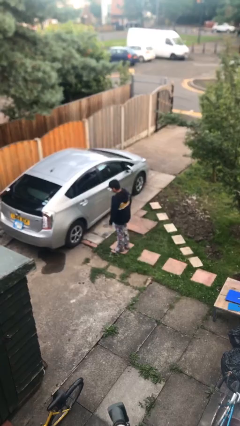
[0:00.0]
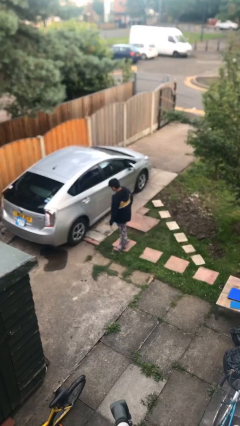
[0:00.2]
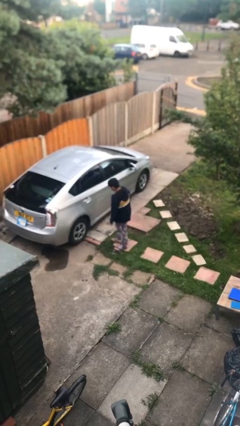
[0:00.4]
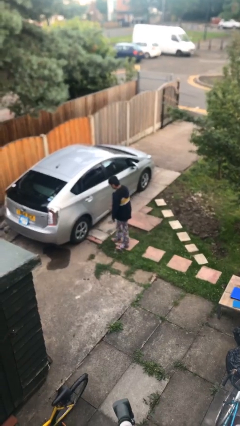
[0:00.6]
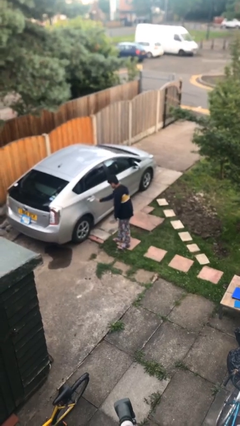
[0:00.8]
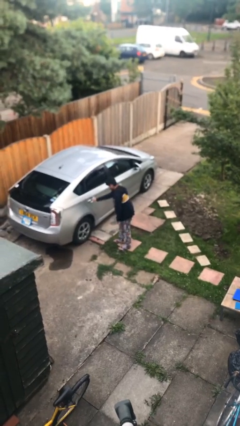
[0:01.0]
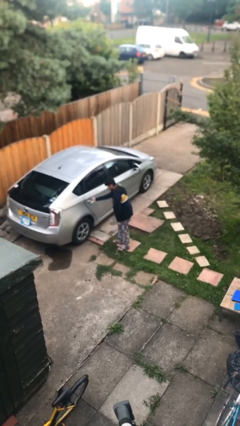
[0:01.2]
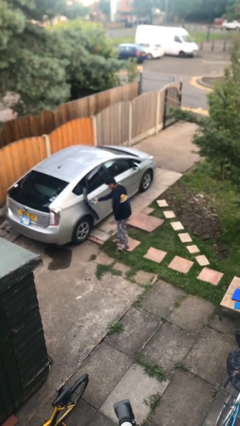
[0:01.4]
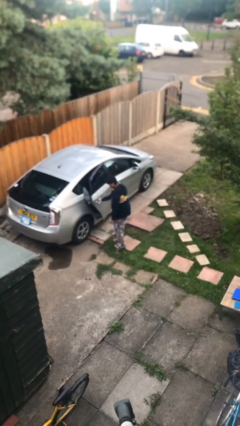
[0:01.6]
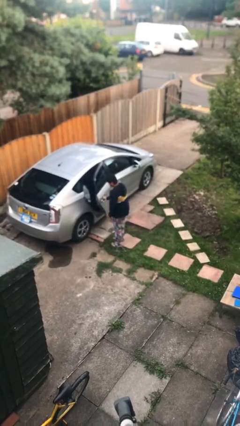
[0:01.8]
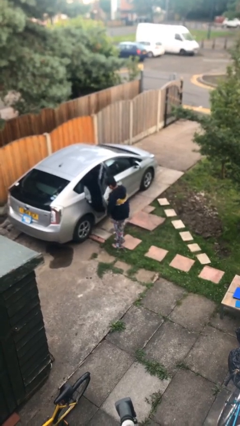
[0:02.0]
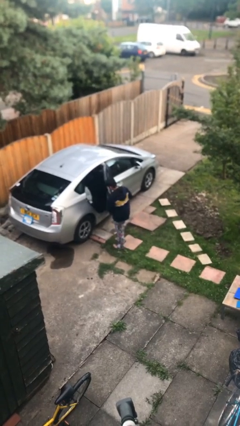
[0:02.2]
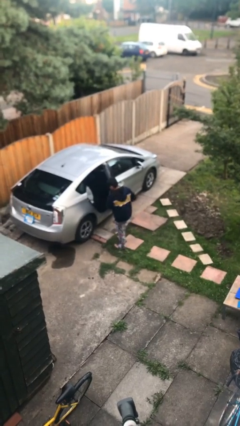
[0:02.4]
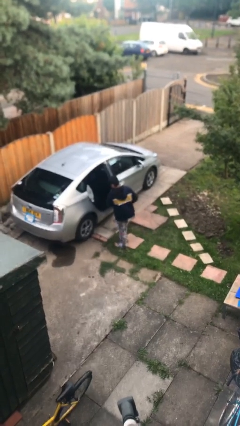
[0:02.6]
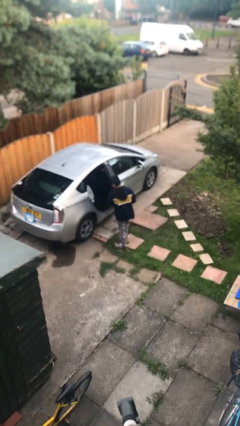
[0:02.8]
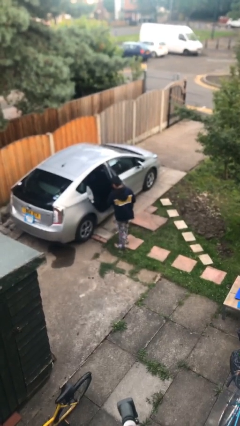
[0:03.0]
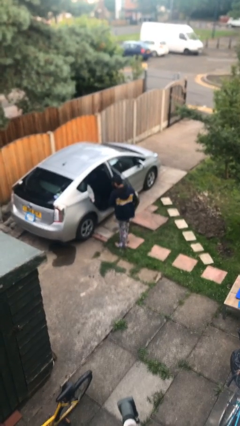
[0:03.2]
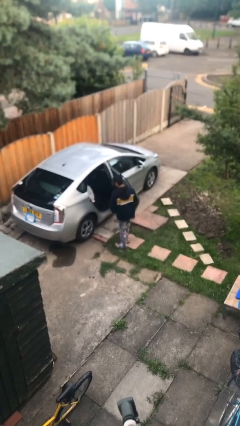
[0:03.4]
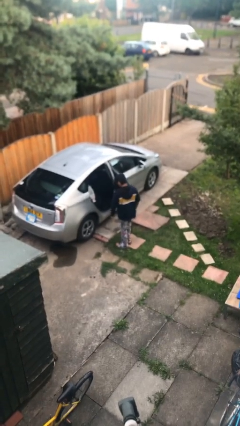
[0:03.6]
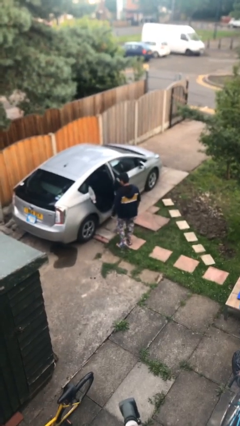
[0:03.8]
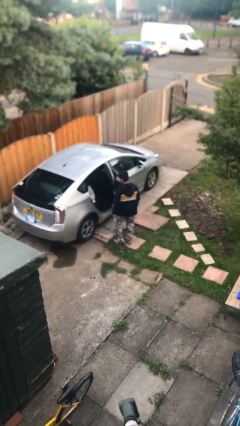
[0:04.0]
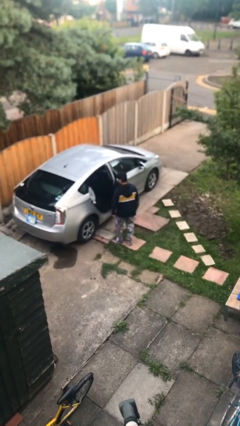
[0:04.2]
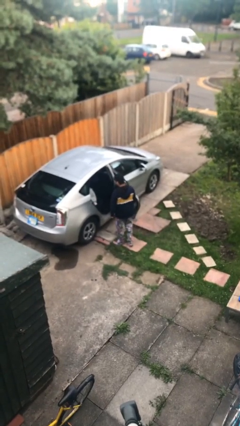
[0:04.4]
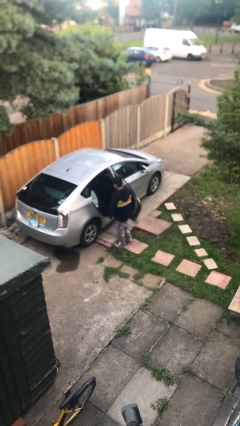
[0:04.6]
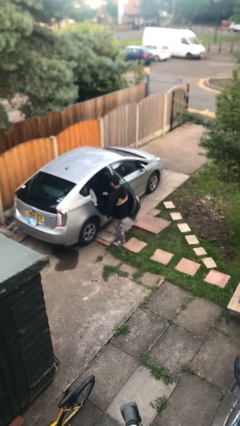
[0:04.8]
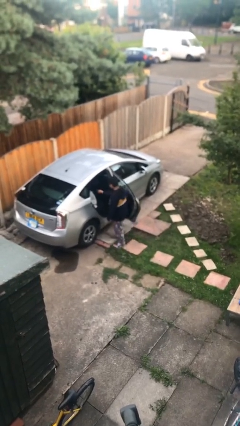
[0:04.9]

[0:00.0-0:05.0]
person opens car door

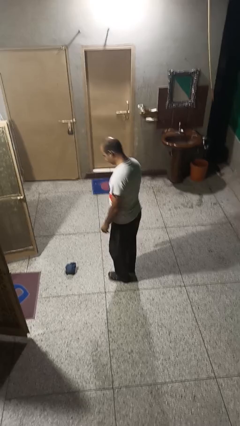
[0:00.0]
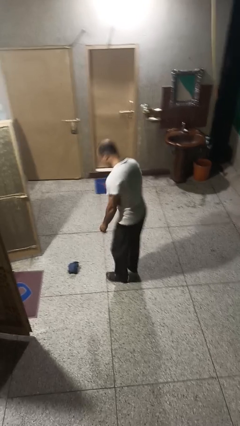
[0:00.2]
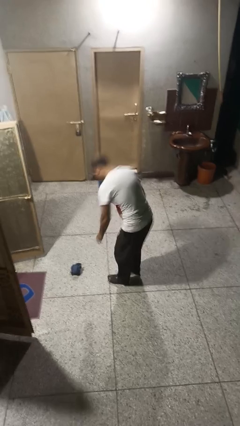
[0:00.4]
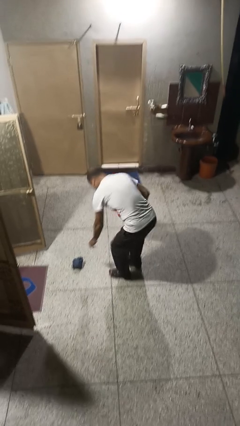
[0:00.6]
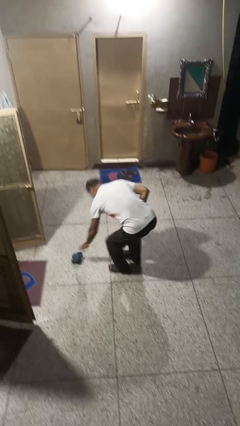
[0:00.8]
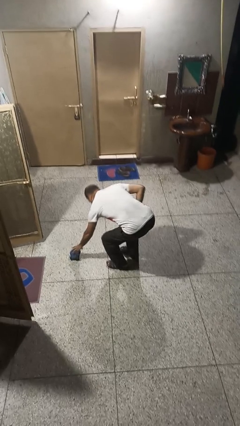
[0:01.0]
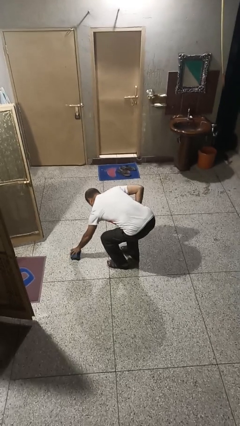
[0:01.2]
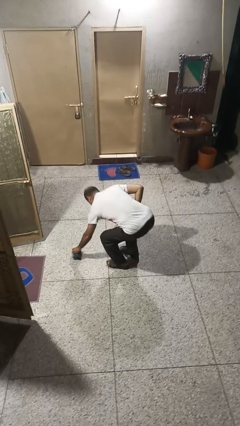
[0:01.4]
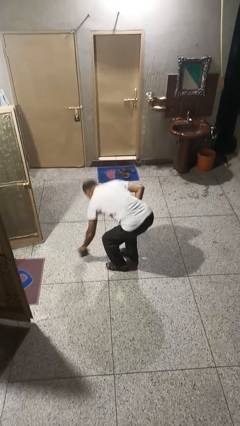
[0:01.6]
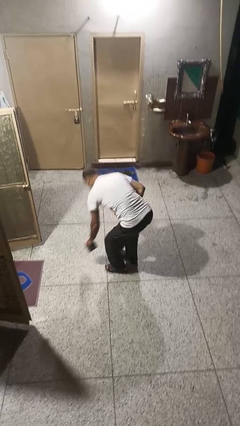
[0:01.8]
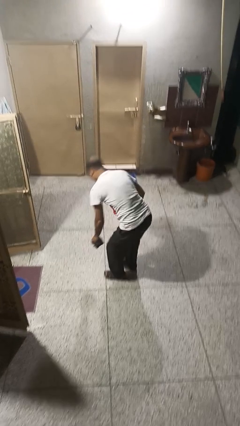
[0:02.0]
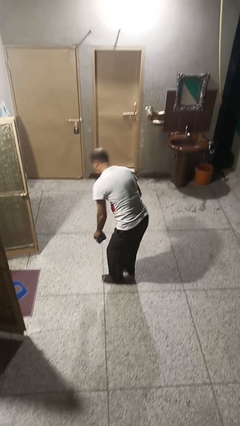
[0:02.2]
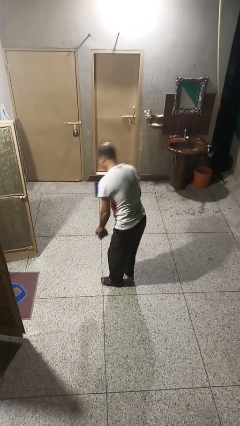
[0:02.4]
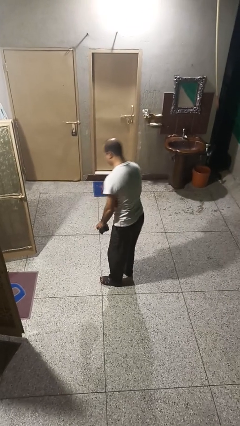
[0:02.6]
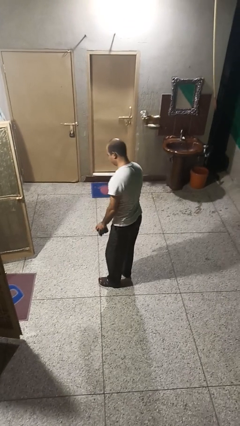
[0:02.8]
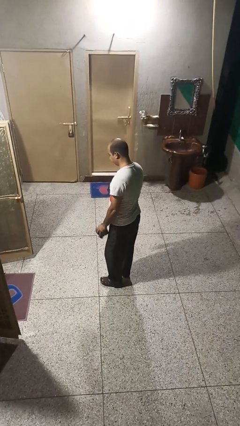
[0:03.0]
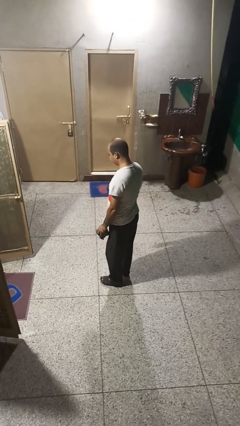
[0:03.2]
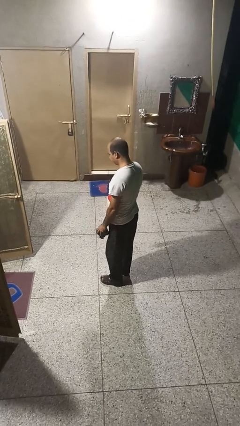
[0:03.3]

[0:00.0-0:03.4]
person picks up object from floor

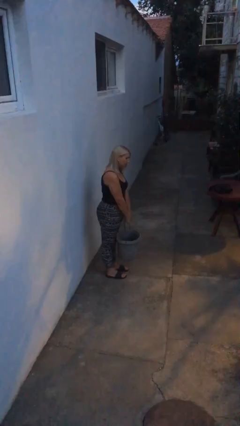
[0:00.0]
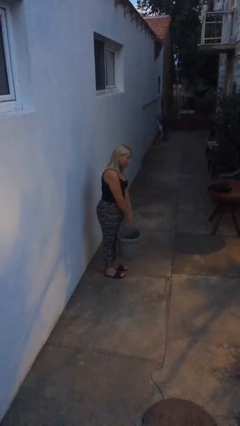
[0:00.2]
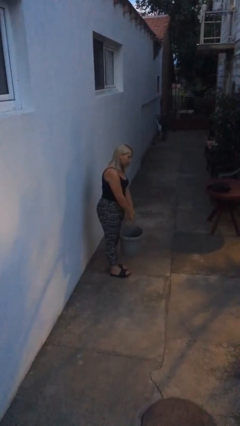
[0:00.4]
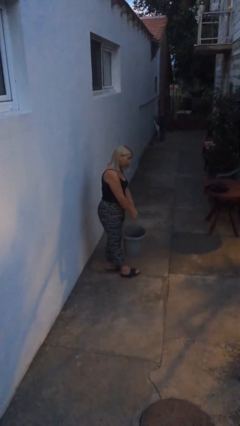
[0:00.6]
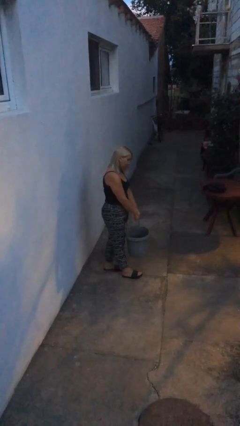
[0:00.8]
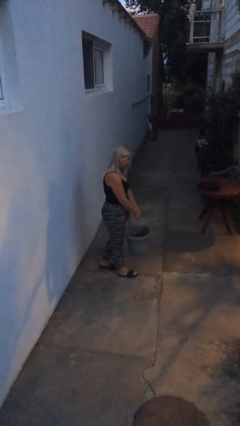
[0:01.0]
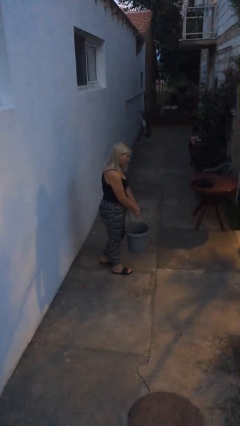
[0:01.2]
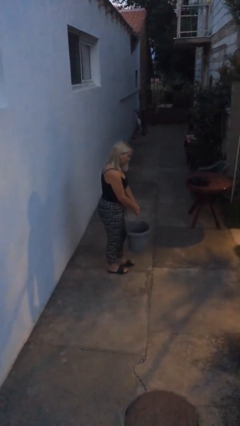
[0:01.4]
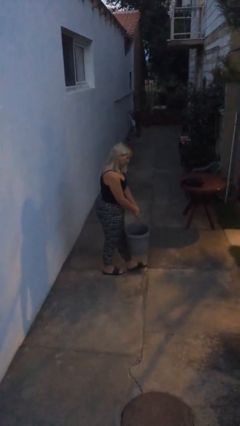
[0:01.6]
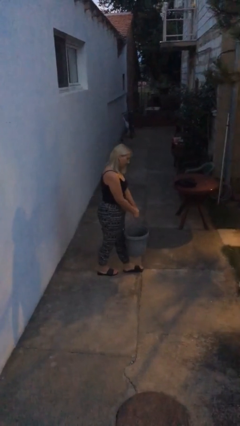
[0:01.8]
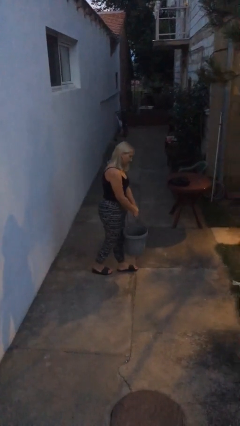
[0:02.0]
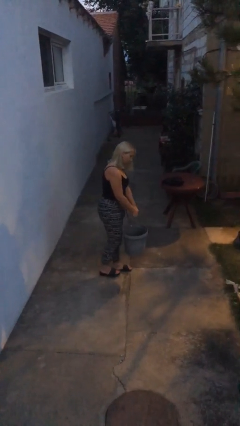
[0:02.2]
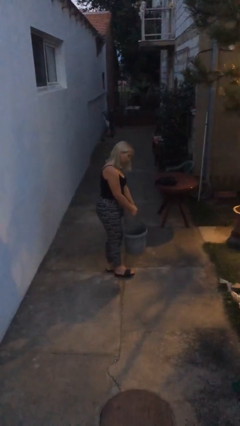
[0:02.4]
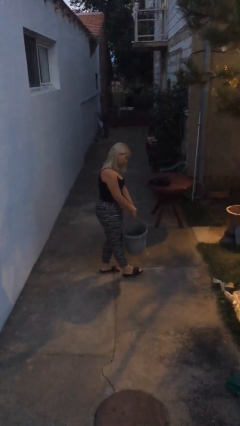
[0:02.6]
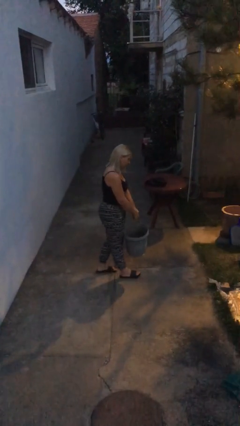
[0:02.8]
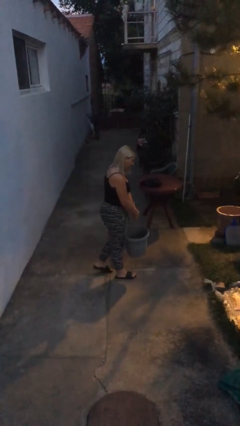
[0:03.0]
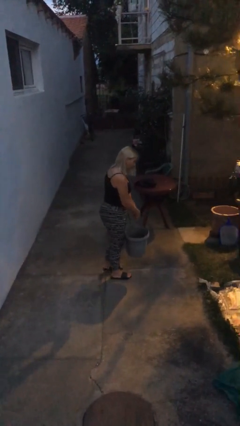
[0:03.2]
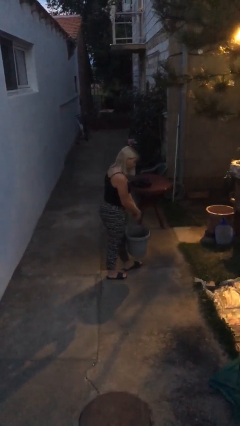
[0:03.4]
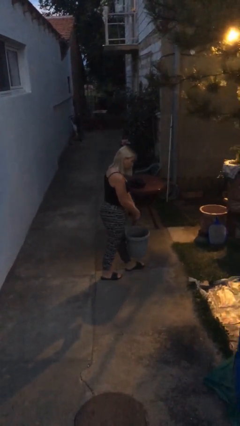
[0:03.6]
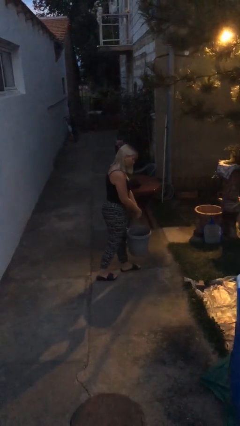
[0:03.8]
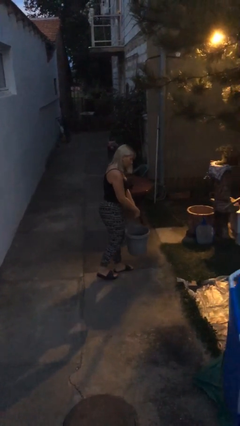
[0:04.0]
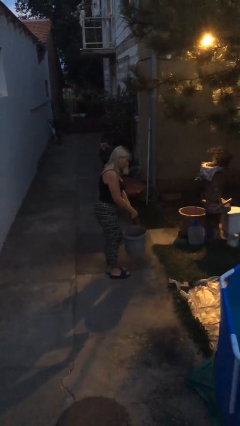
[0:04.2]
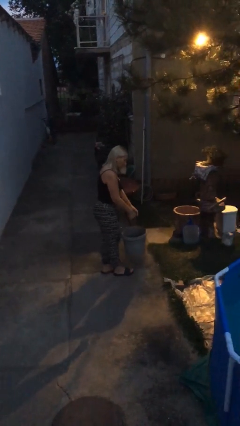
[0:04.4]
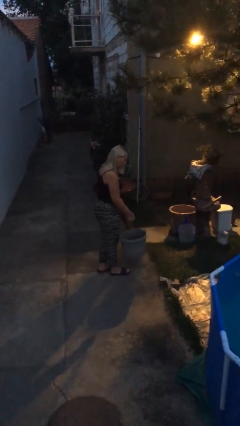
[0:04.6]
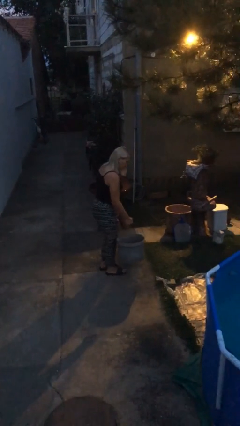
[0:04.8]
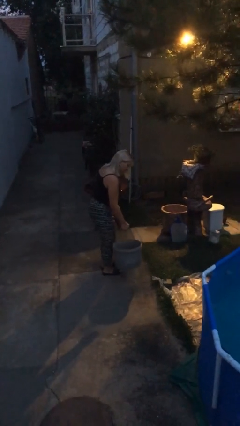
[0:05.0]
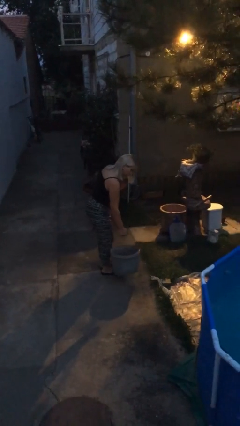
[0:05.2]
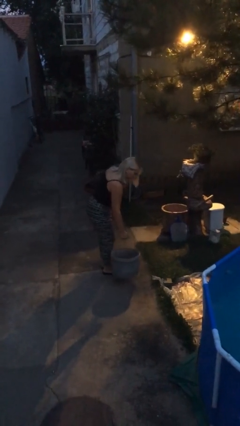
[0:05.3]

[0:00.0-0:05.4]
person carries heavy object

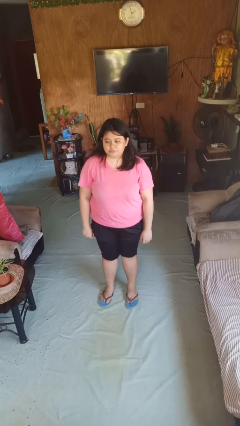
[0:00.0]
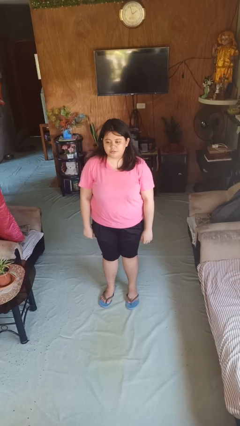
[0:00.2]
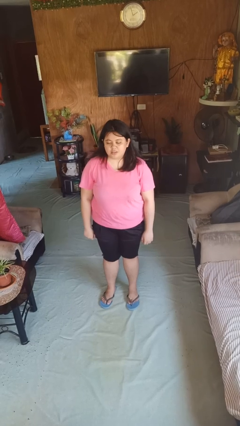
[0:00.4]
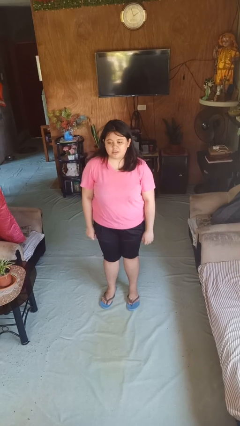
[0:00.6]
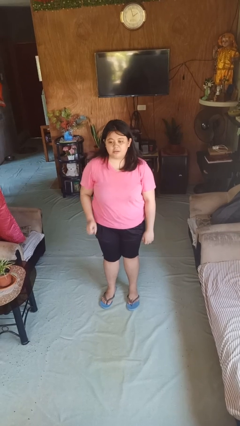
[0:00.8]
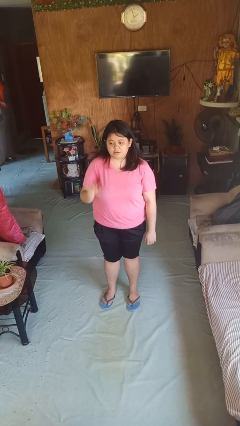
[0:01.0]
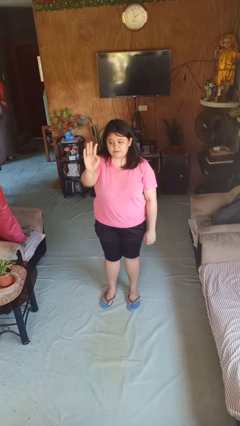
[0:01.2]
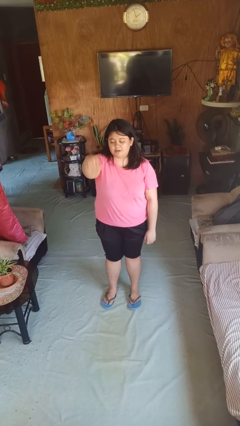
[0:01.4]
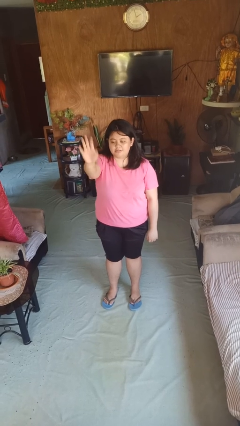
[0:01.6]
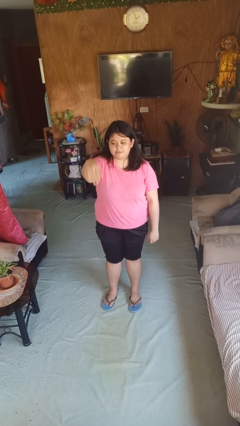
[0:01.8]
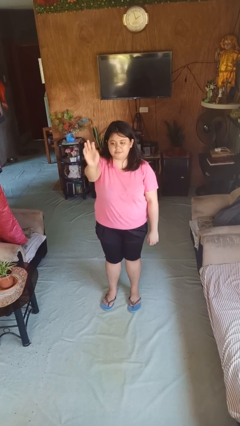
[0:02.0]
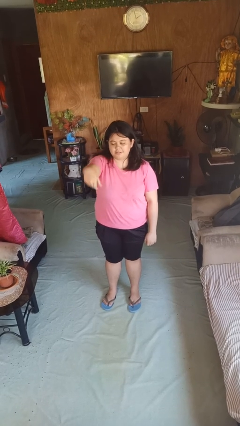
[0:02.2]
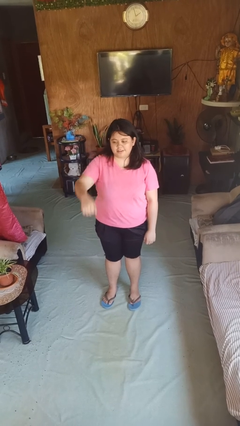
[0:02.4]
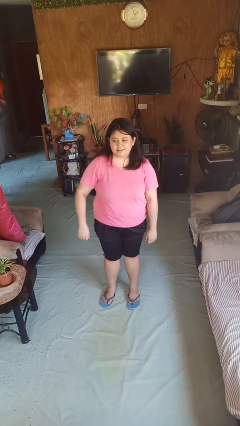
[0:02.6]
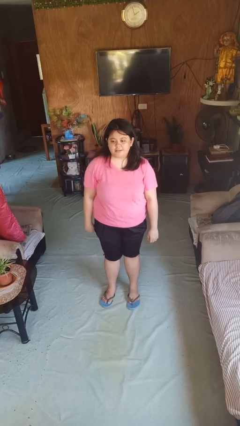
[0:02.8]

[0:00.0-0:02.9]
person gestures come here

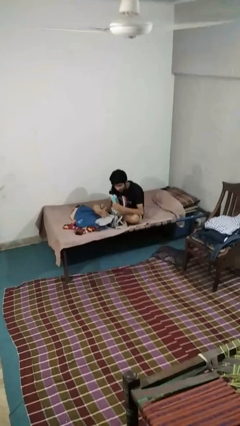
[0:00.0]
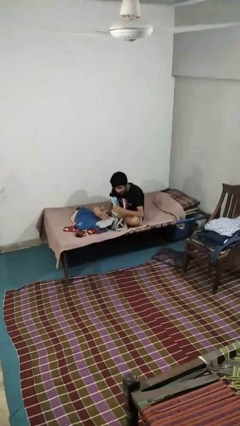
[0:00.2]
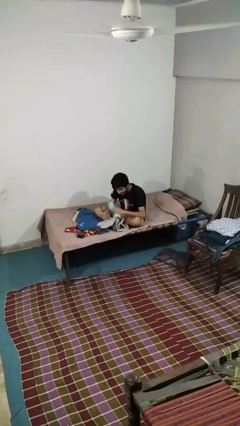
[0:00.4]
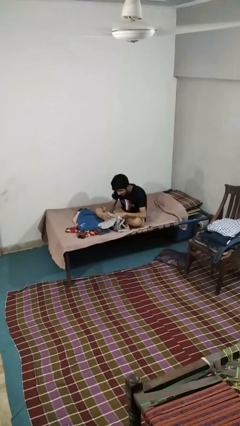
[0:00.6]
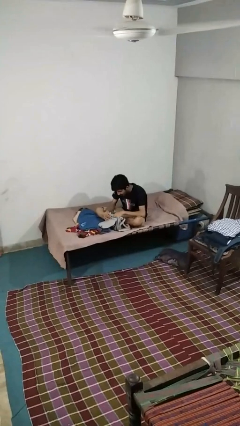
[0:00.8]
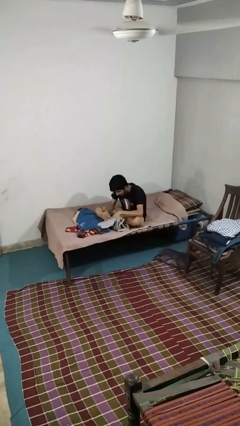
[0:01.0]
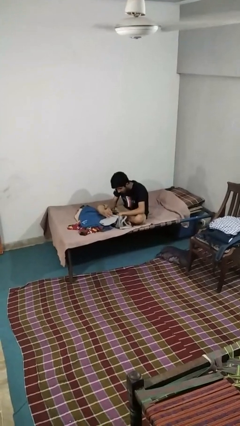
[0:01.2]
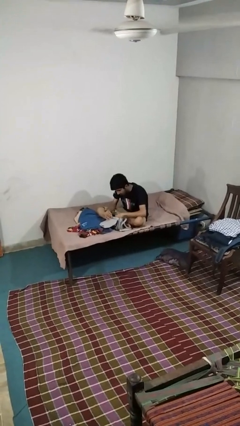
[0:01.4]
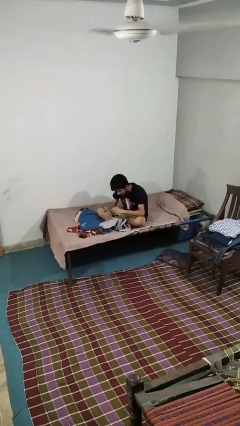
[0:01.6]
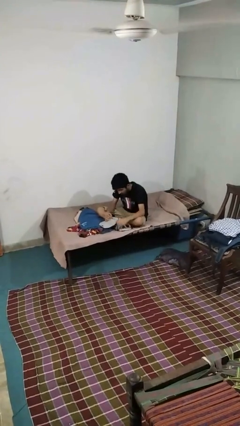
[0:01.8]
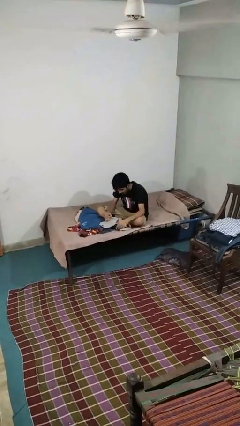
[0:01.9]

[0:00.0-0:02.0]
person puts object into purse
